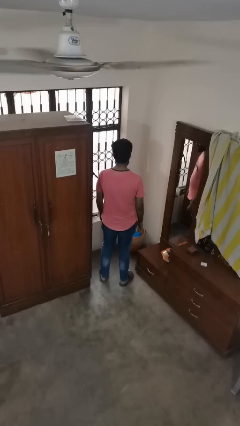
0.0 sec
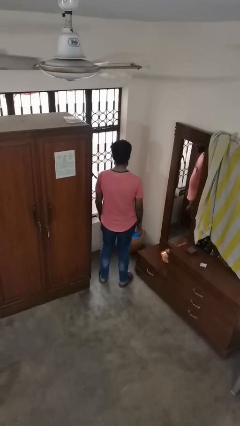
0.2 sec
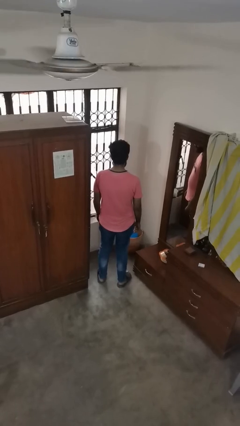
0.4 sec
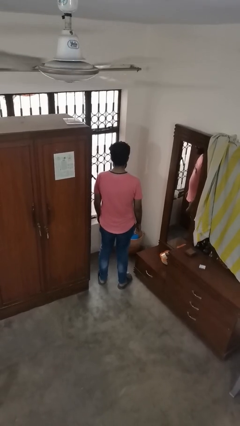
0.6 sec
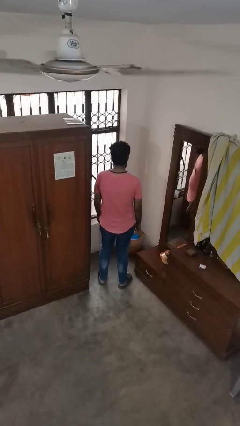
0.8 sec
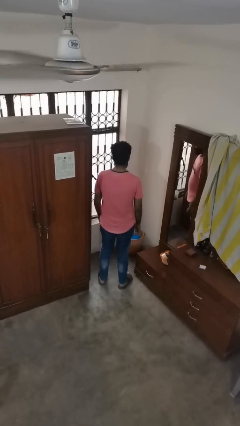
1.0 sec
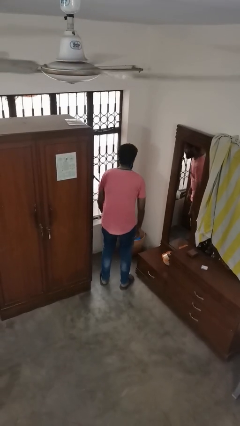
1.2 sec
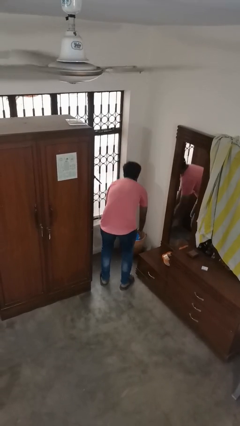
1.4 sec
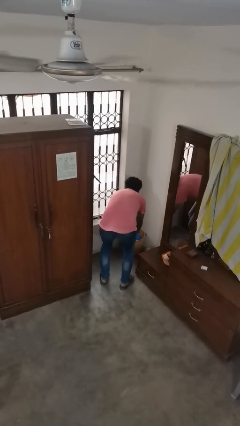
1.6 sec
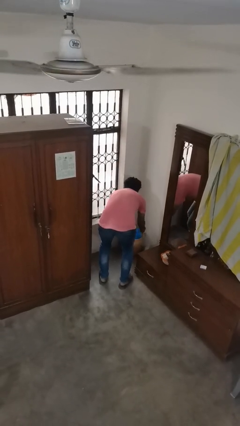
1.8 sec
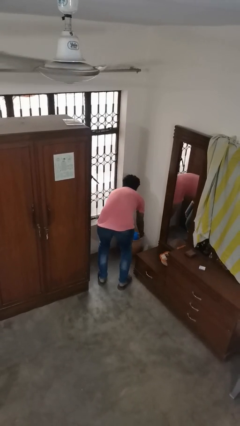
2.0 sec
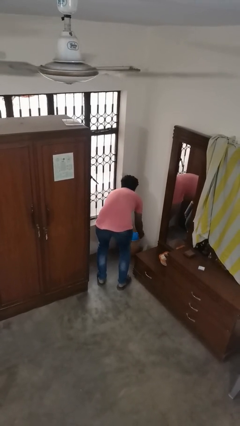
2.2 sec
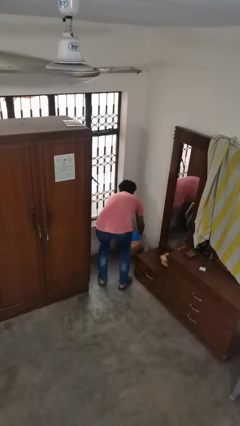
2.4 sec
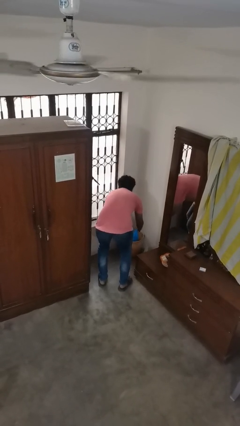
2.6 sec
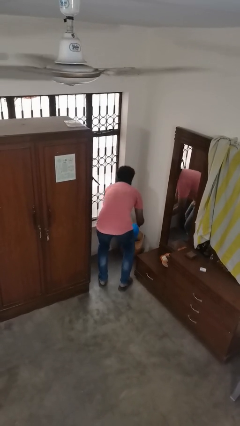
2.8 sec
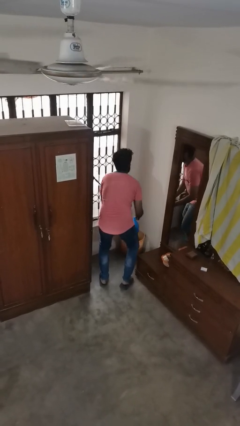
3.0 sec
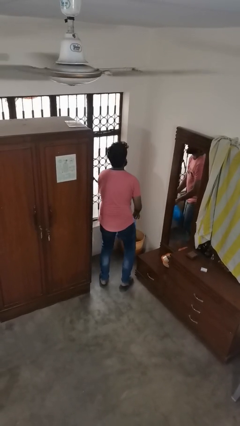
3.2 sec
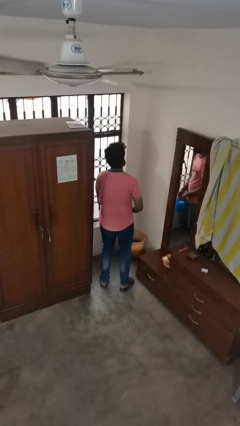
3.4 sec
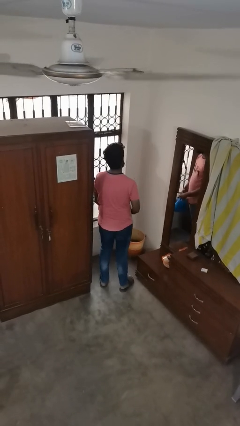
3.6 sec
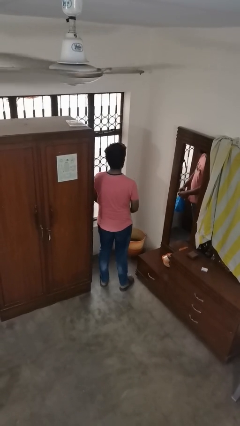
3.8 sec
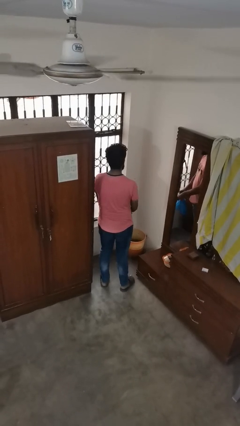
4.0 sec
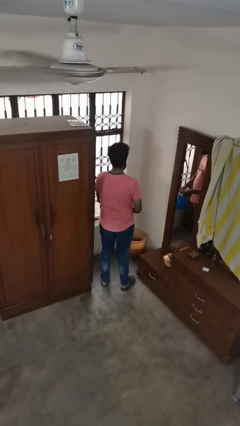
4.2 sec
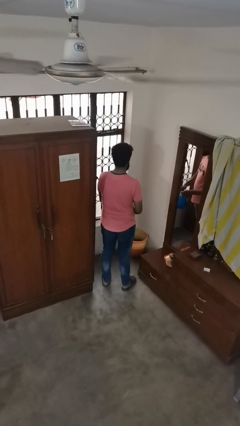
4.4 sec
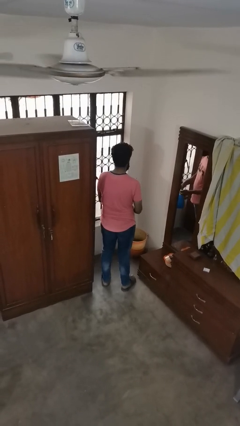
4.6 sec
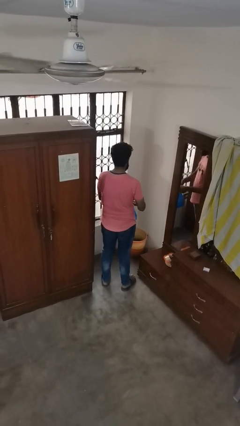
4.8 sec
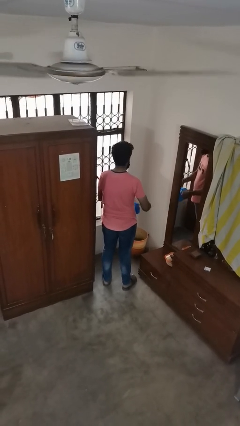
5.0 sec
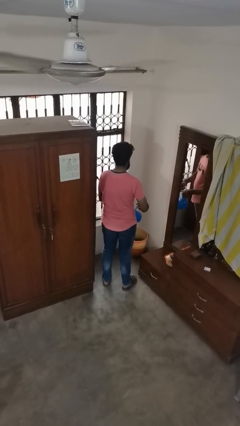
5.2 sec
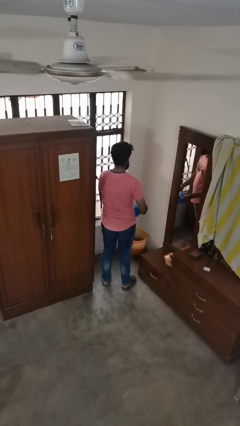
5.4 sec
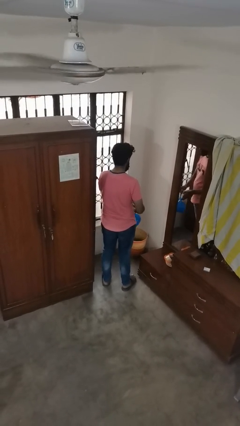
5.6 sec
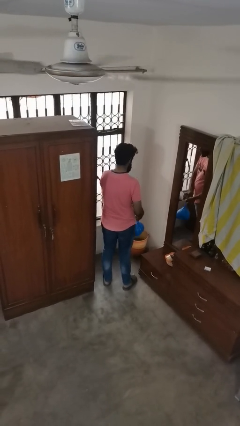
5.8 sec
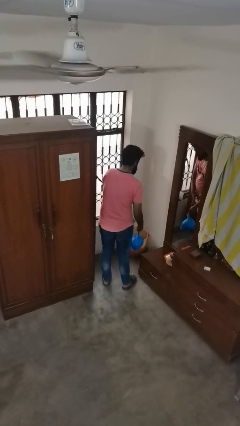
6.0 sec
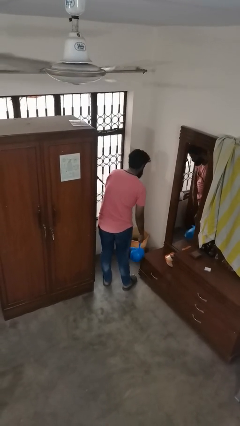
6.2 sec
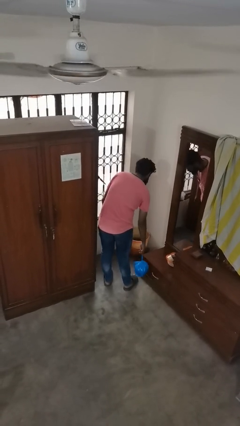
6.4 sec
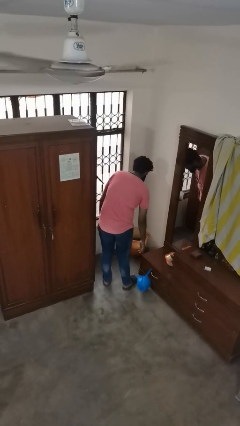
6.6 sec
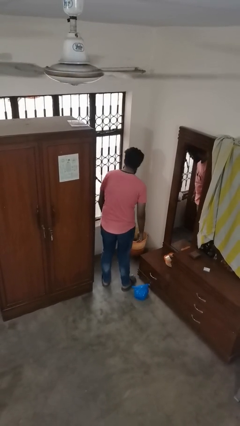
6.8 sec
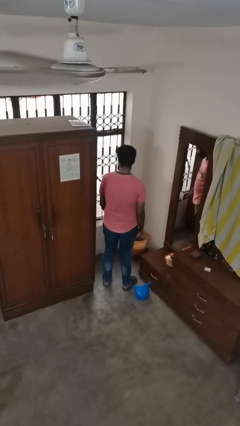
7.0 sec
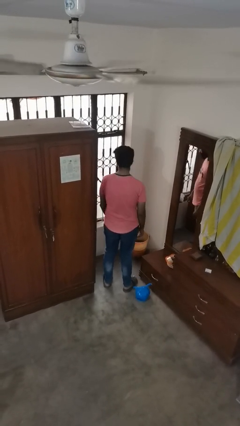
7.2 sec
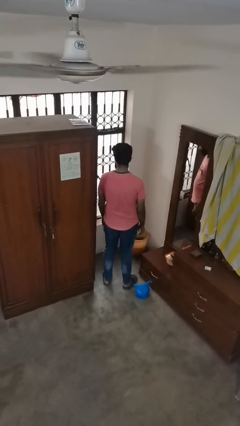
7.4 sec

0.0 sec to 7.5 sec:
person removes trashbag from trashcan

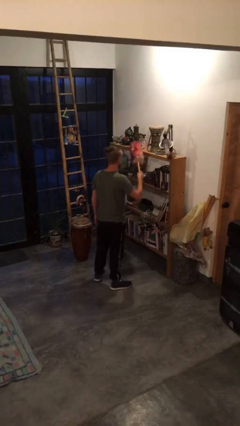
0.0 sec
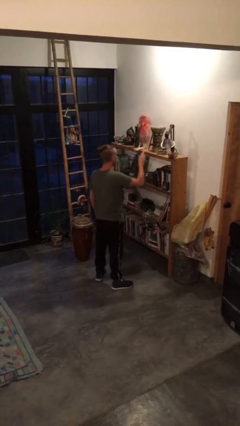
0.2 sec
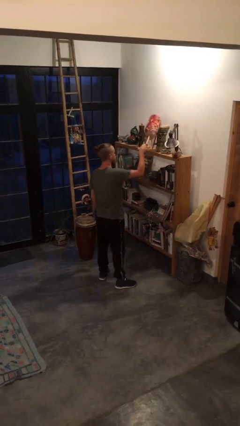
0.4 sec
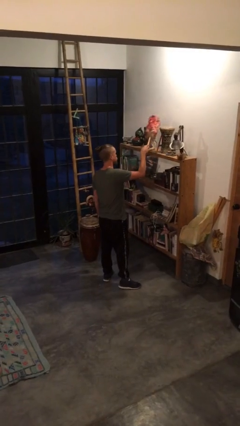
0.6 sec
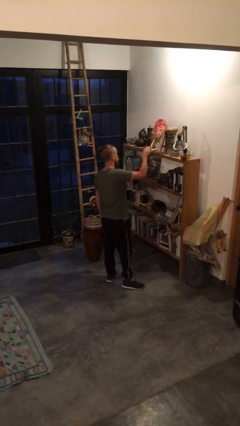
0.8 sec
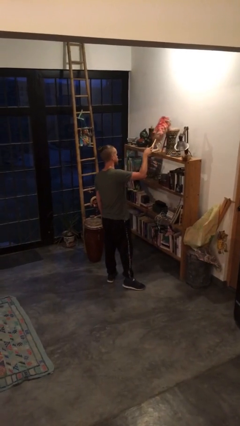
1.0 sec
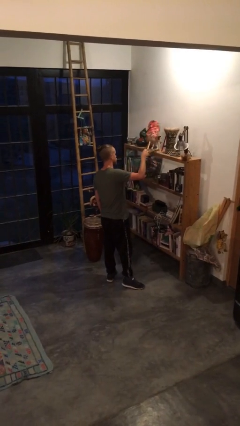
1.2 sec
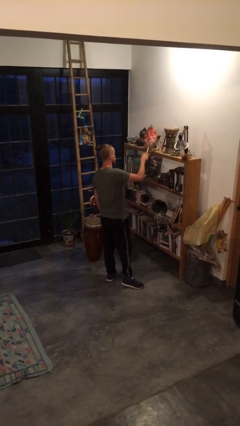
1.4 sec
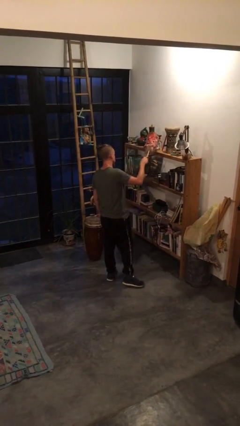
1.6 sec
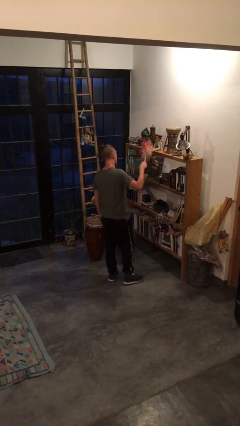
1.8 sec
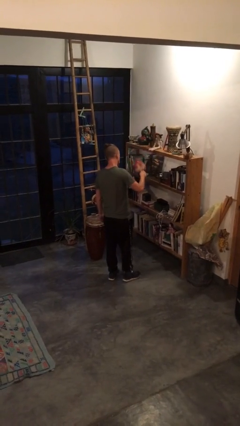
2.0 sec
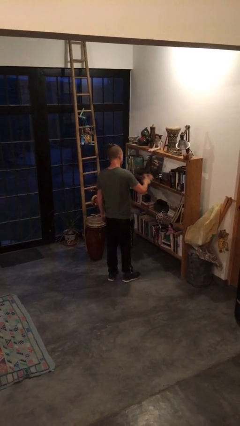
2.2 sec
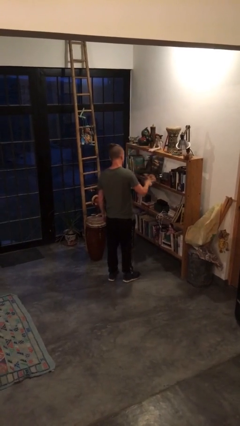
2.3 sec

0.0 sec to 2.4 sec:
person dusts furniture

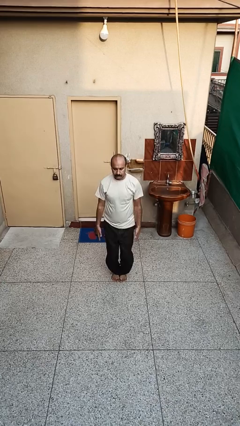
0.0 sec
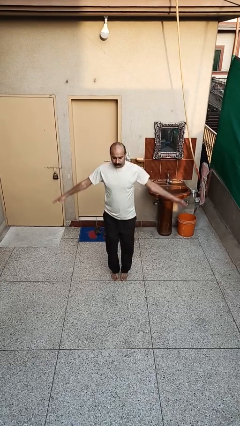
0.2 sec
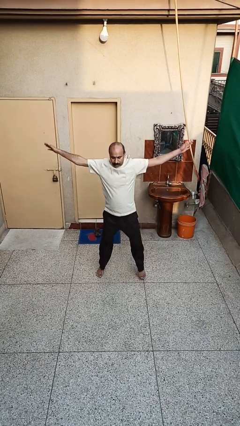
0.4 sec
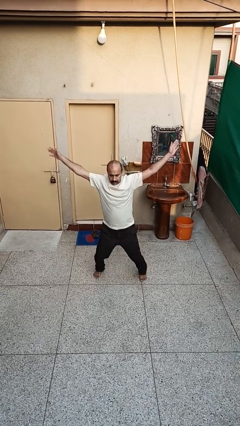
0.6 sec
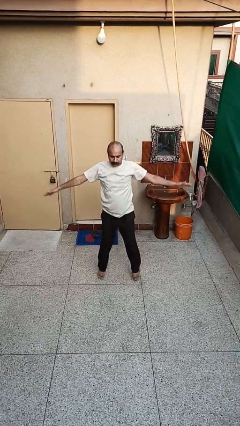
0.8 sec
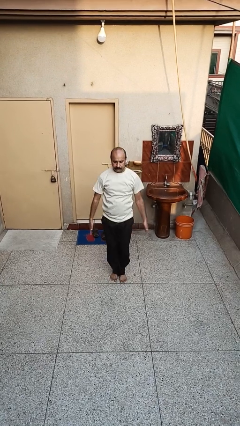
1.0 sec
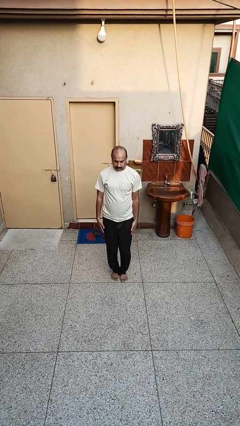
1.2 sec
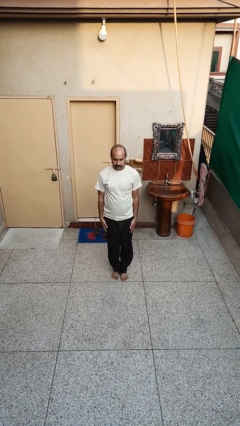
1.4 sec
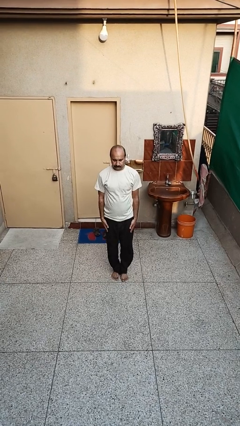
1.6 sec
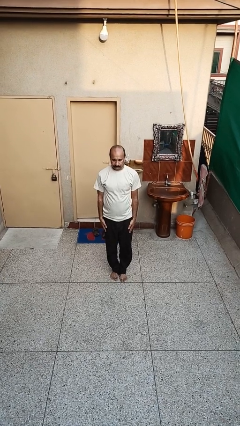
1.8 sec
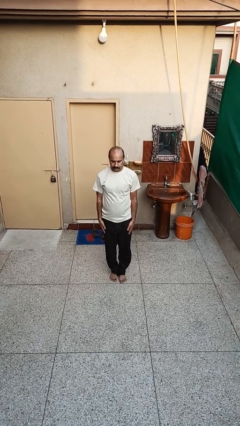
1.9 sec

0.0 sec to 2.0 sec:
person exercises with jumping jacks

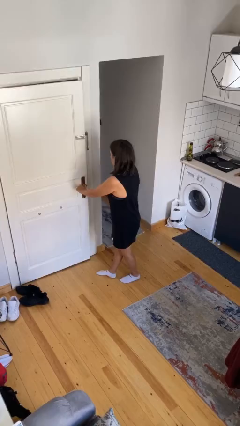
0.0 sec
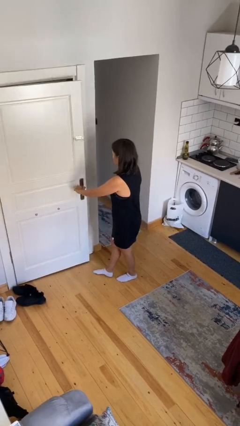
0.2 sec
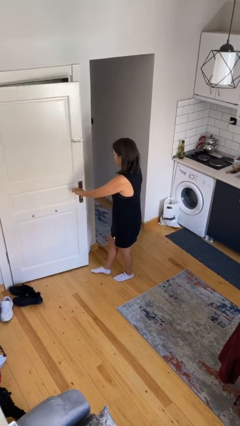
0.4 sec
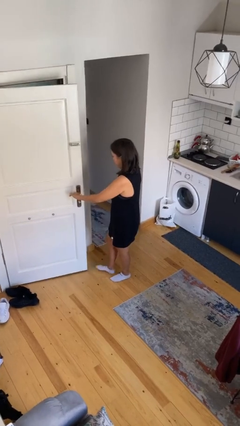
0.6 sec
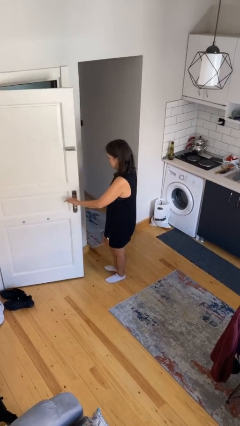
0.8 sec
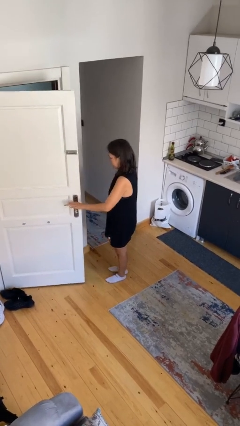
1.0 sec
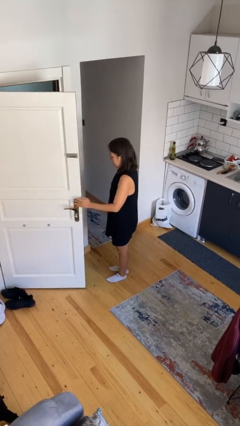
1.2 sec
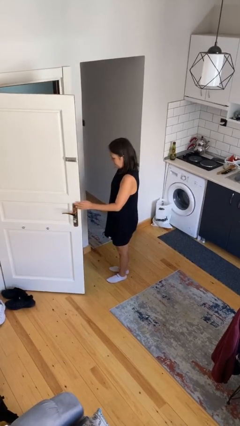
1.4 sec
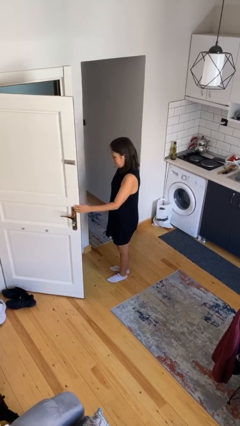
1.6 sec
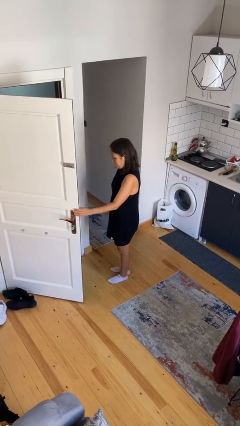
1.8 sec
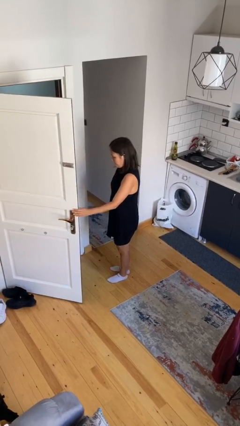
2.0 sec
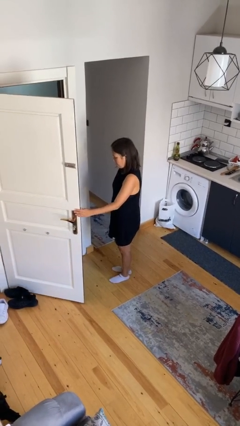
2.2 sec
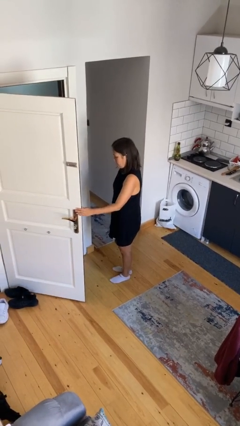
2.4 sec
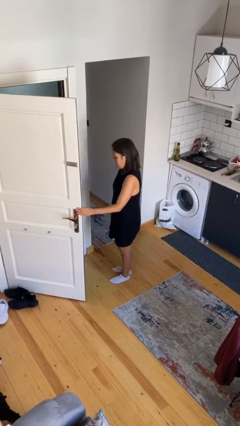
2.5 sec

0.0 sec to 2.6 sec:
person opens facility door

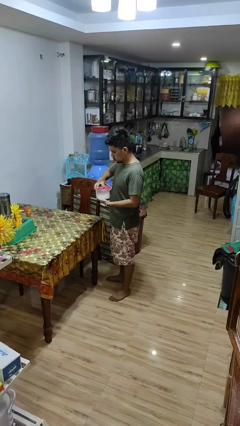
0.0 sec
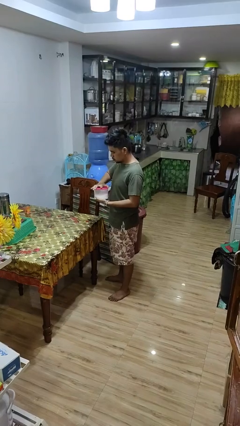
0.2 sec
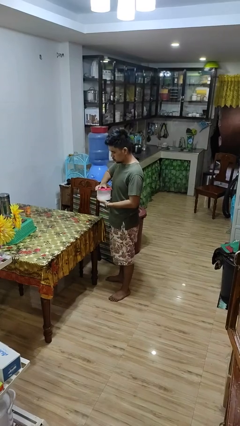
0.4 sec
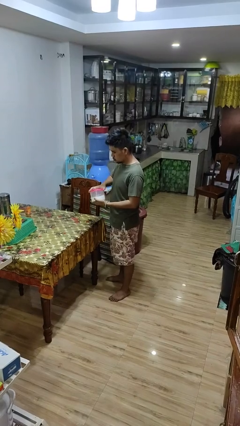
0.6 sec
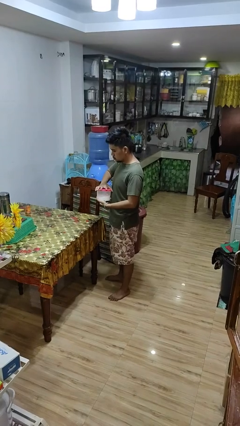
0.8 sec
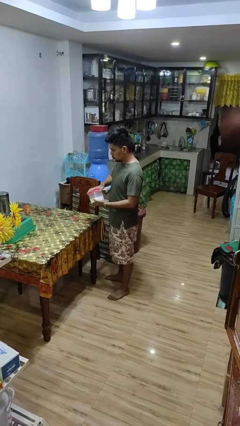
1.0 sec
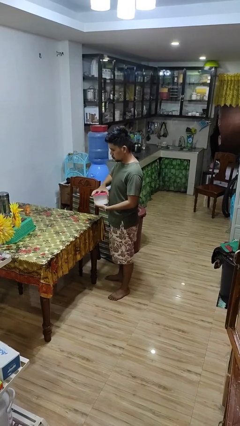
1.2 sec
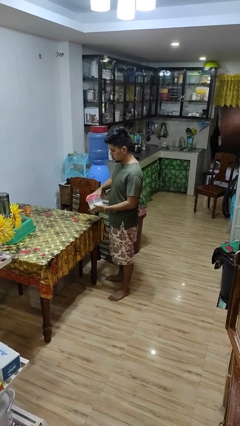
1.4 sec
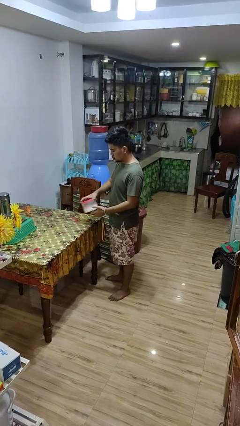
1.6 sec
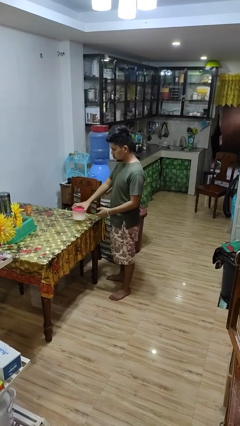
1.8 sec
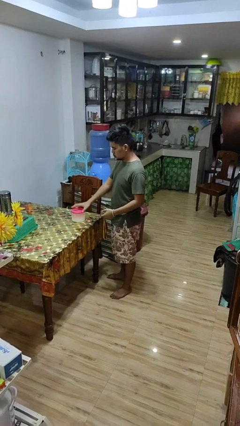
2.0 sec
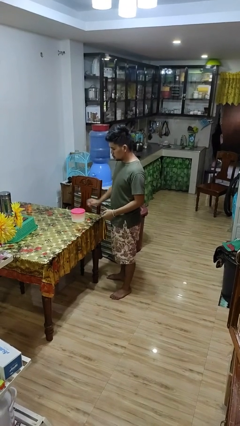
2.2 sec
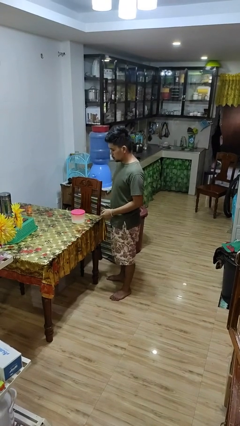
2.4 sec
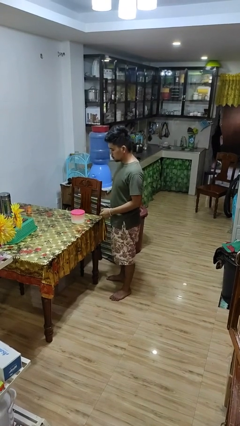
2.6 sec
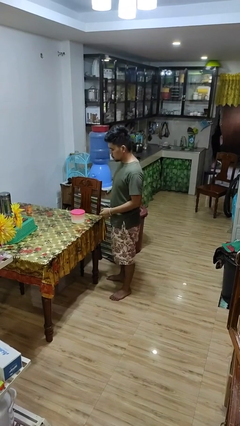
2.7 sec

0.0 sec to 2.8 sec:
person closes jar

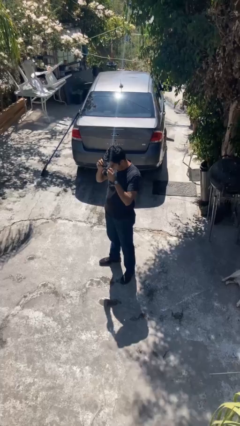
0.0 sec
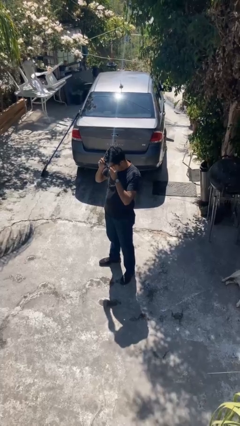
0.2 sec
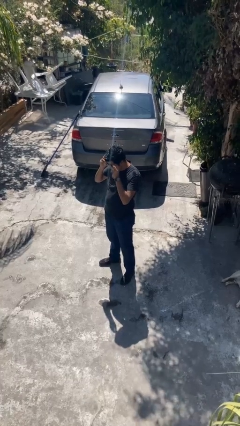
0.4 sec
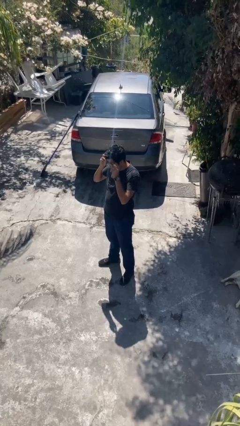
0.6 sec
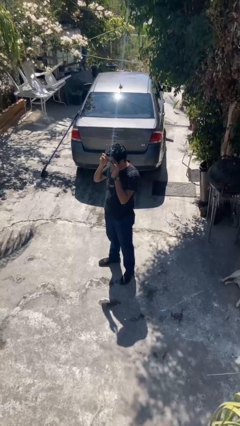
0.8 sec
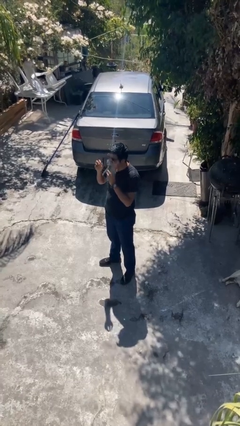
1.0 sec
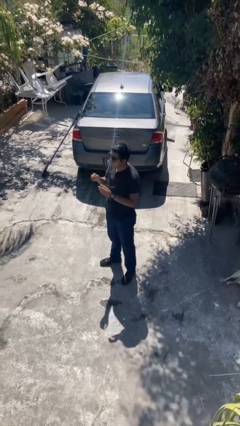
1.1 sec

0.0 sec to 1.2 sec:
person puts on sunglasses
